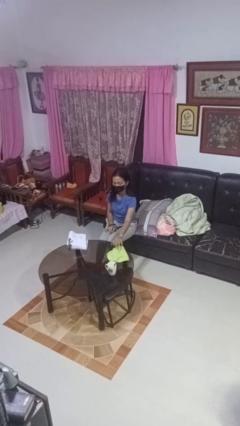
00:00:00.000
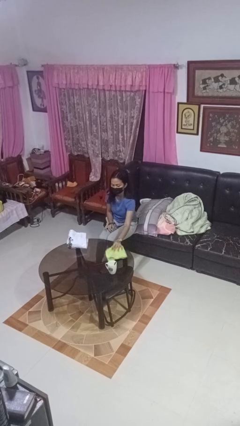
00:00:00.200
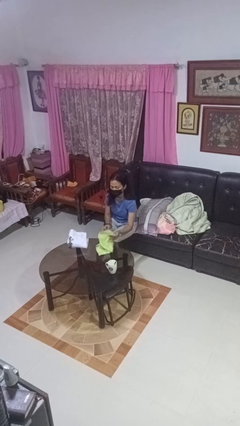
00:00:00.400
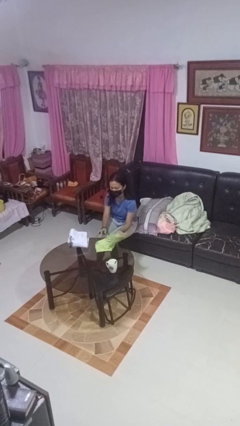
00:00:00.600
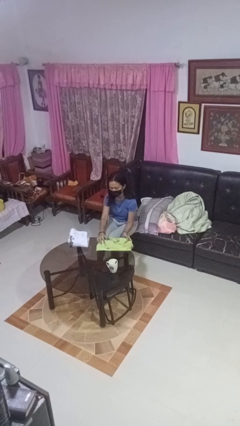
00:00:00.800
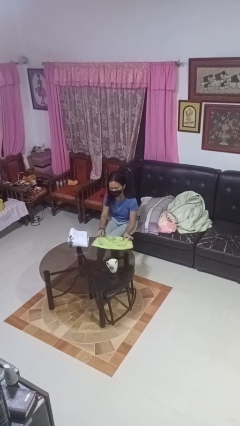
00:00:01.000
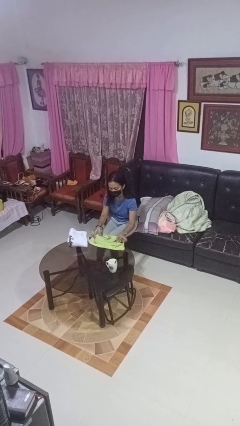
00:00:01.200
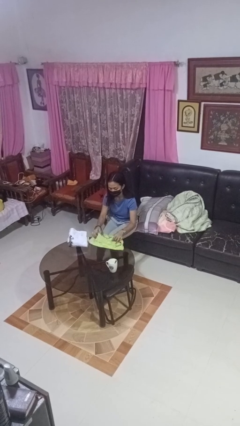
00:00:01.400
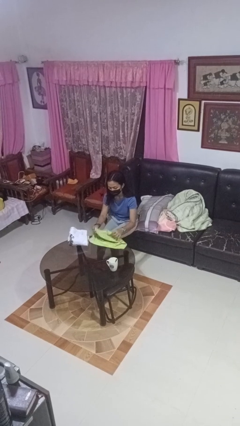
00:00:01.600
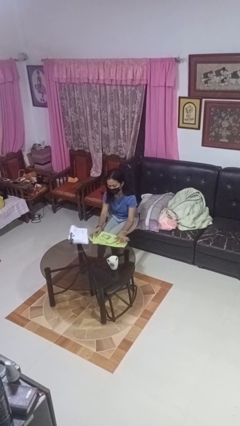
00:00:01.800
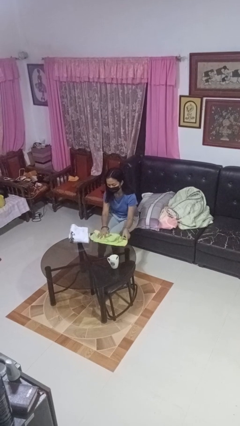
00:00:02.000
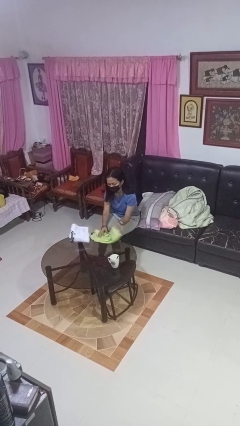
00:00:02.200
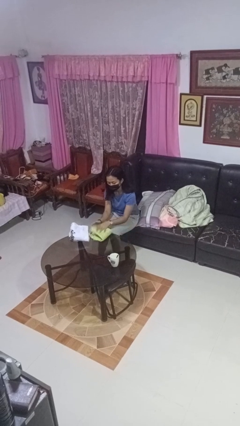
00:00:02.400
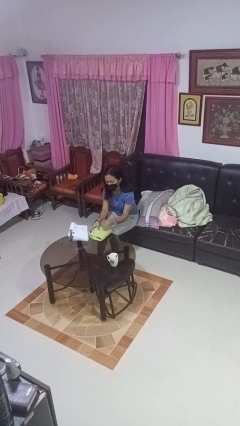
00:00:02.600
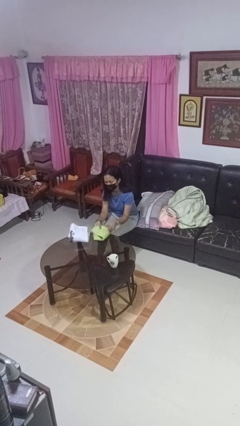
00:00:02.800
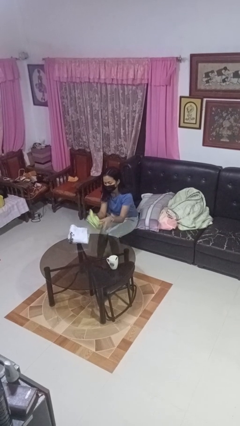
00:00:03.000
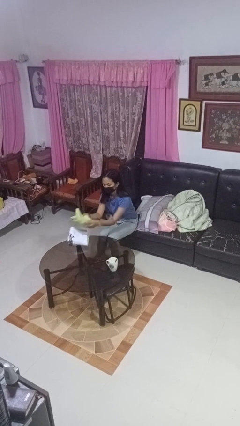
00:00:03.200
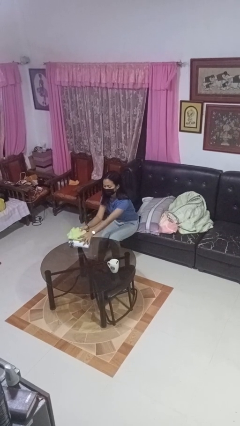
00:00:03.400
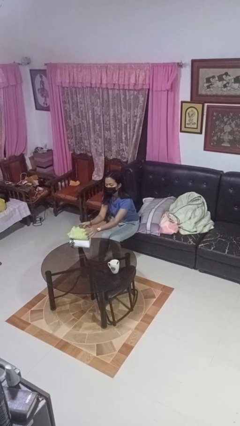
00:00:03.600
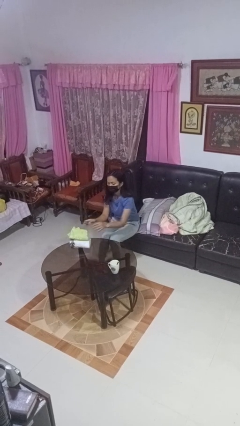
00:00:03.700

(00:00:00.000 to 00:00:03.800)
person folds towel

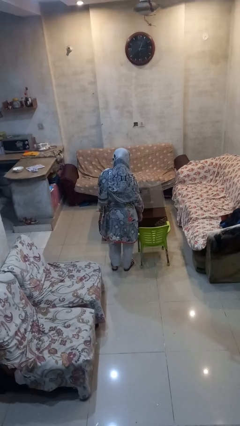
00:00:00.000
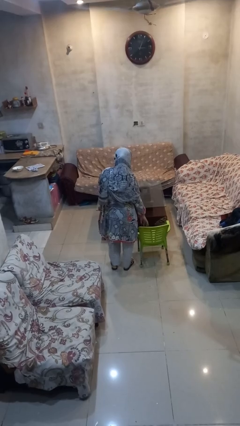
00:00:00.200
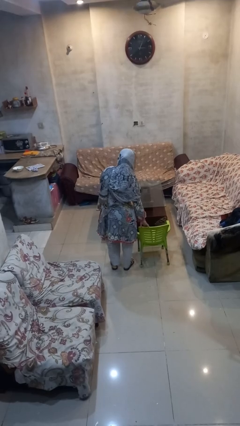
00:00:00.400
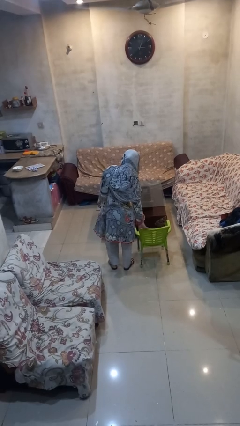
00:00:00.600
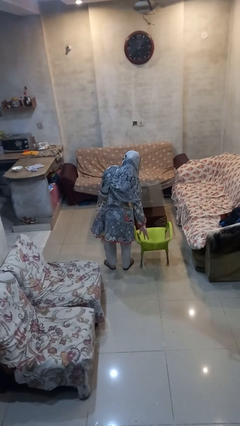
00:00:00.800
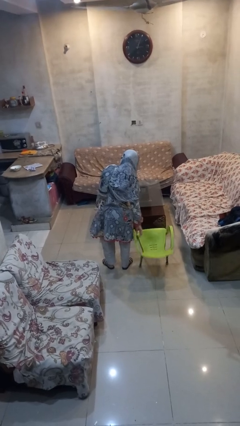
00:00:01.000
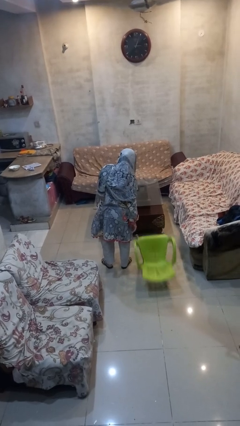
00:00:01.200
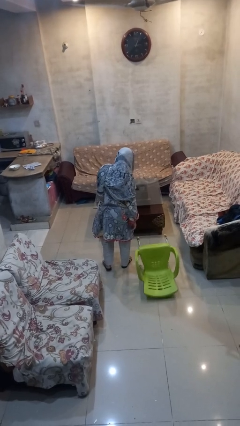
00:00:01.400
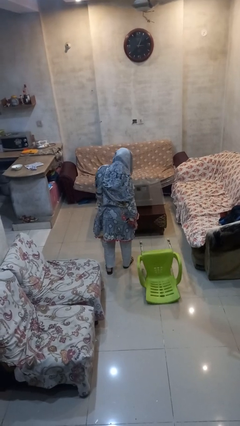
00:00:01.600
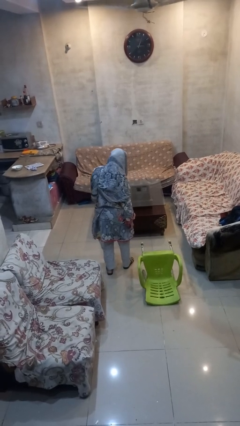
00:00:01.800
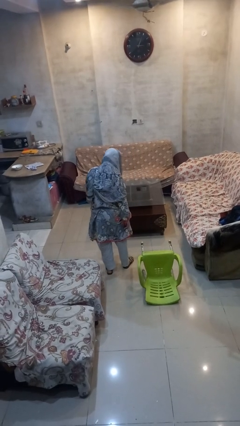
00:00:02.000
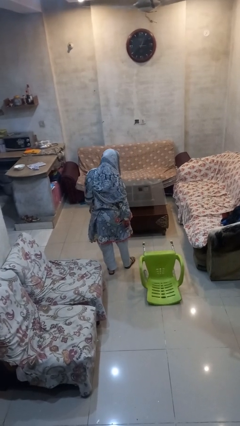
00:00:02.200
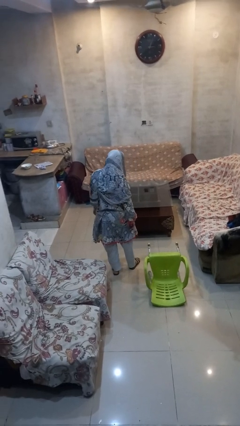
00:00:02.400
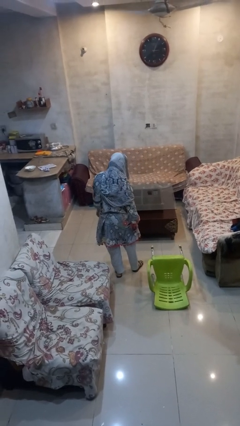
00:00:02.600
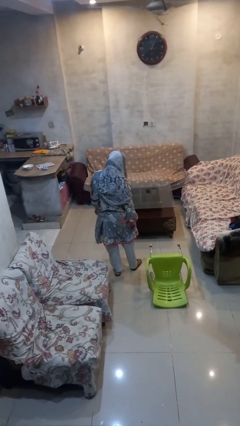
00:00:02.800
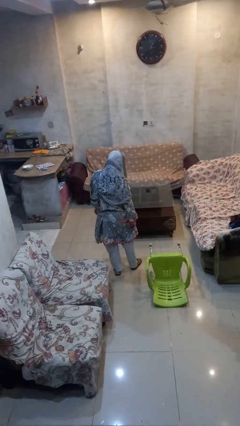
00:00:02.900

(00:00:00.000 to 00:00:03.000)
person knocks over furniture

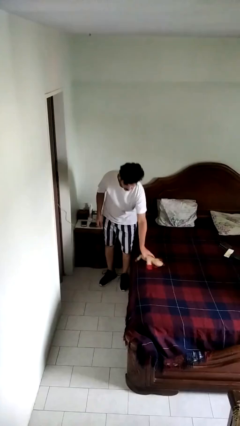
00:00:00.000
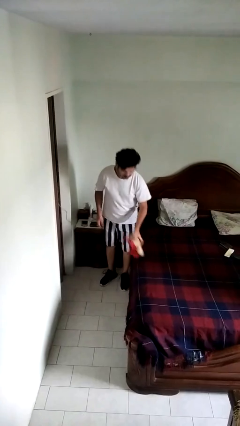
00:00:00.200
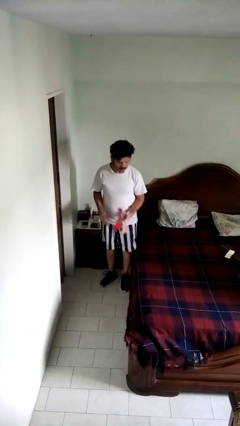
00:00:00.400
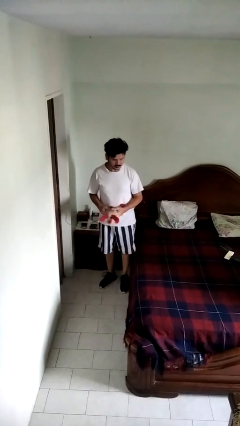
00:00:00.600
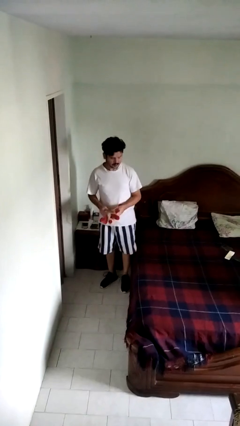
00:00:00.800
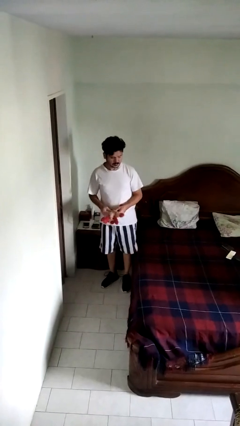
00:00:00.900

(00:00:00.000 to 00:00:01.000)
person picks up object from bed

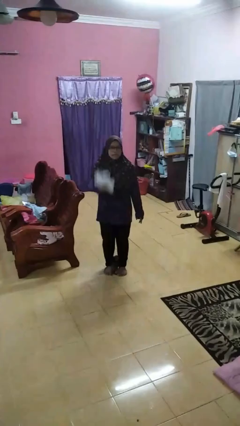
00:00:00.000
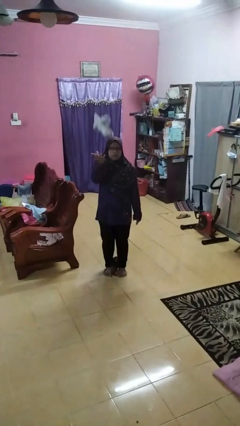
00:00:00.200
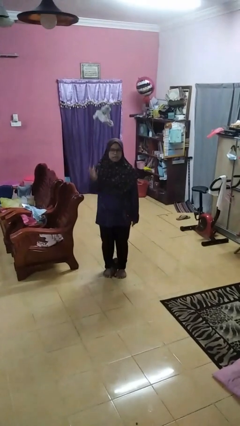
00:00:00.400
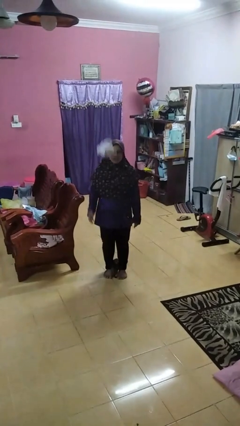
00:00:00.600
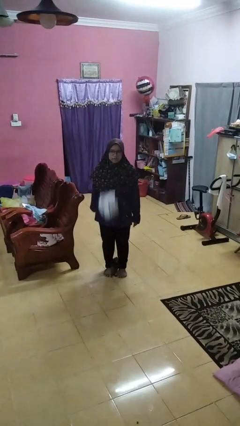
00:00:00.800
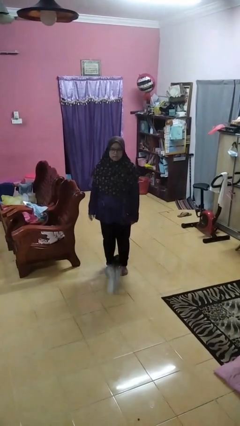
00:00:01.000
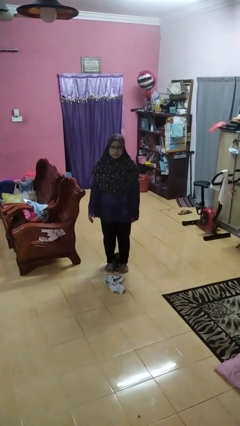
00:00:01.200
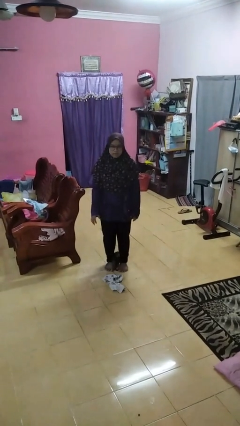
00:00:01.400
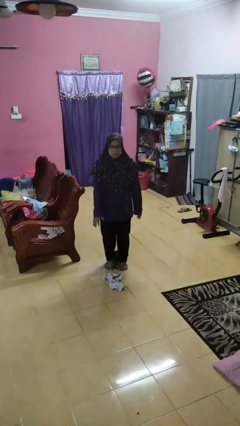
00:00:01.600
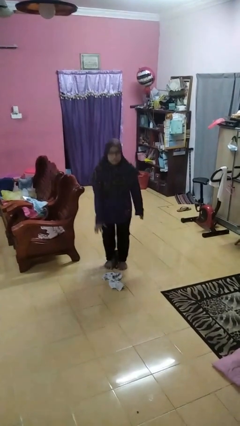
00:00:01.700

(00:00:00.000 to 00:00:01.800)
person throws object into air

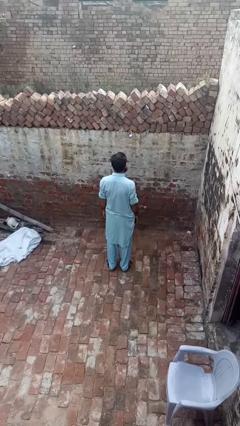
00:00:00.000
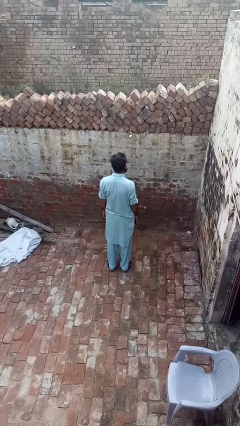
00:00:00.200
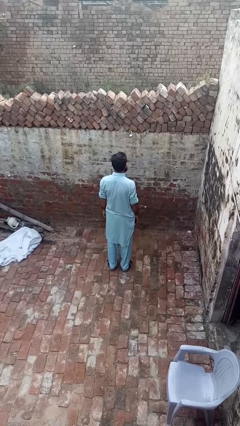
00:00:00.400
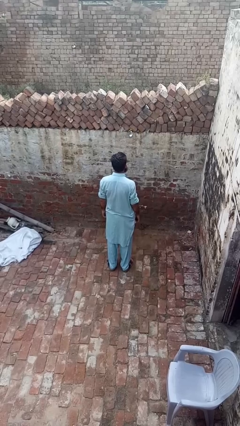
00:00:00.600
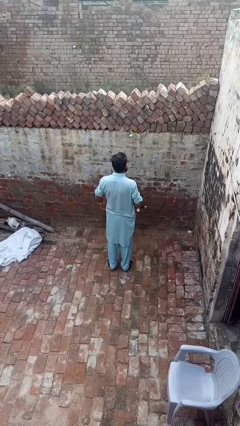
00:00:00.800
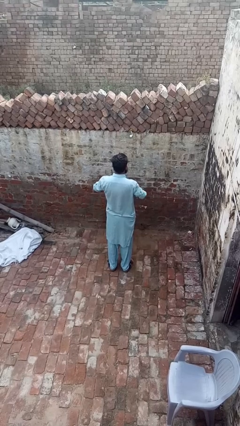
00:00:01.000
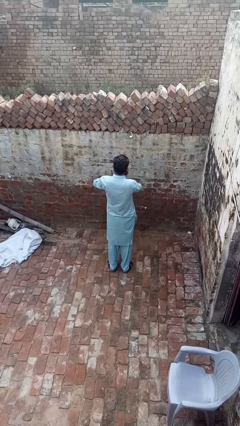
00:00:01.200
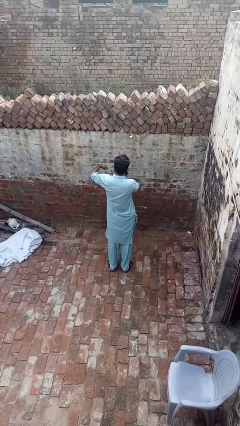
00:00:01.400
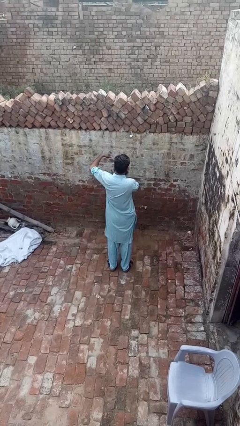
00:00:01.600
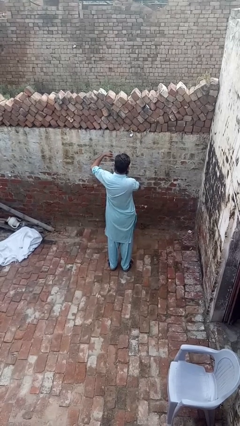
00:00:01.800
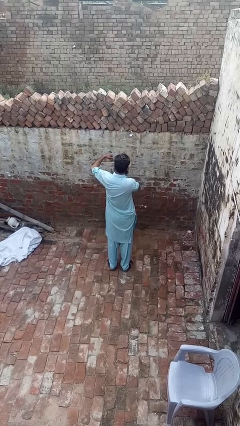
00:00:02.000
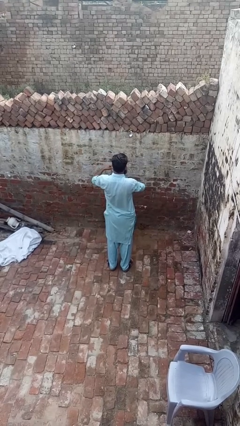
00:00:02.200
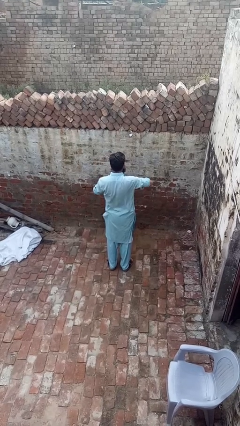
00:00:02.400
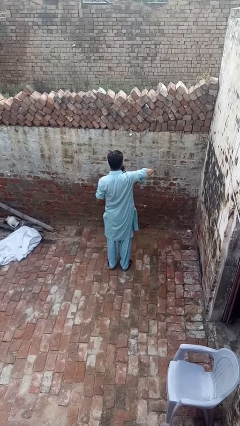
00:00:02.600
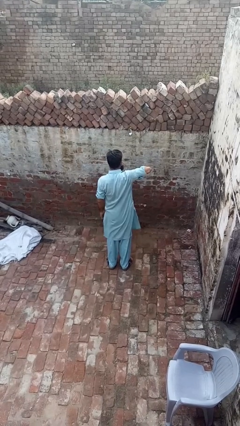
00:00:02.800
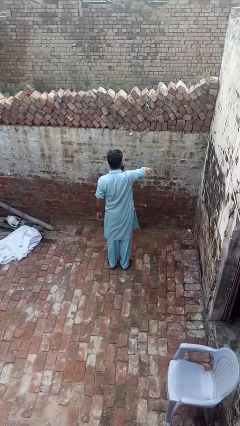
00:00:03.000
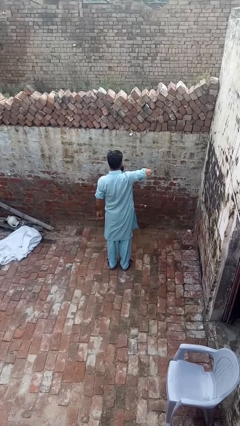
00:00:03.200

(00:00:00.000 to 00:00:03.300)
person applies deodorant

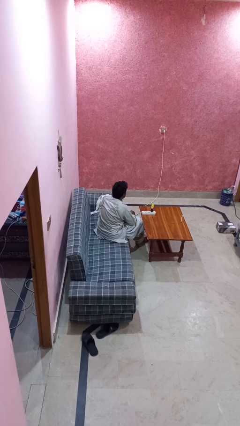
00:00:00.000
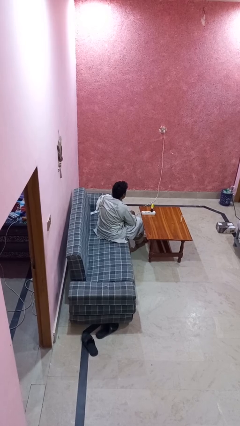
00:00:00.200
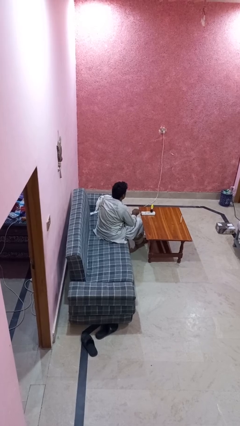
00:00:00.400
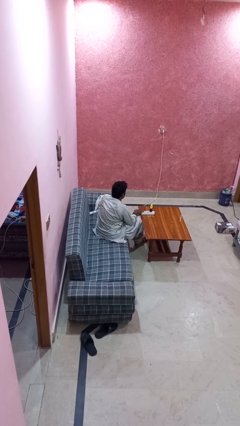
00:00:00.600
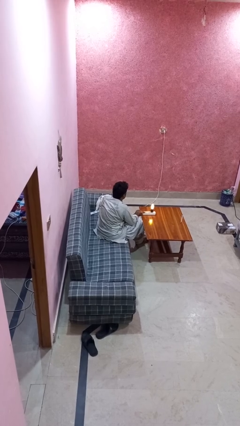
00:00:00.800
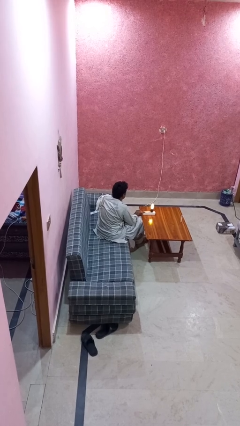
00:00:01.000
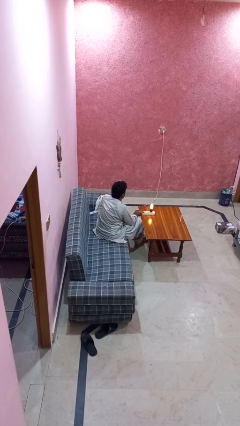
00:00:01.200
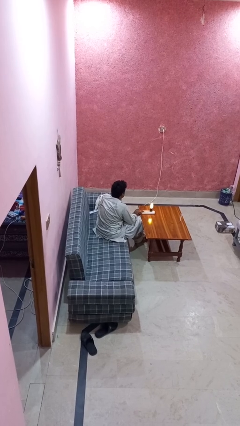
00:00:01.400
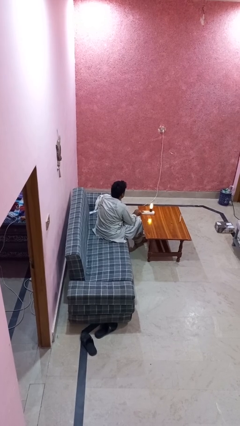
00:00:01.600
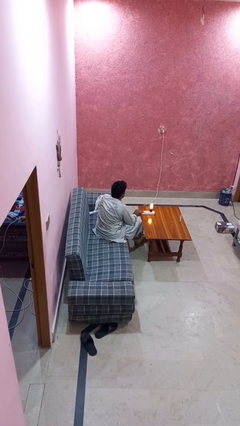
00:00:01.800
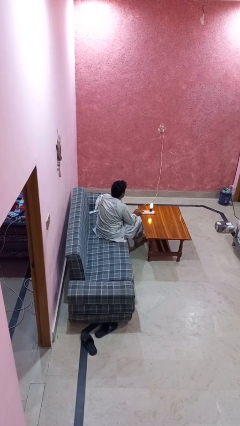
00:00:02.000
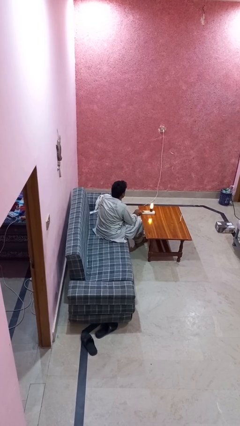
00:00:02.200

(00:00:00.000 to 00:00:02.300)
person turns on lamp

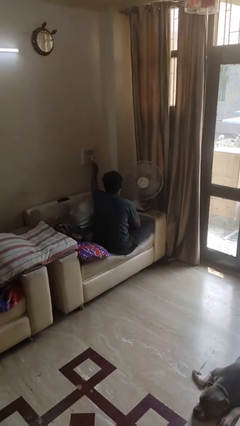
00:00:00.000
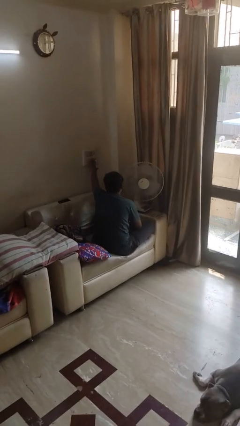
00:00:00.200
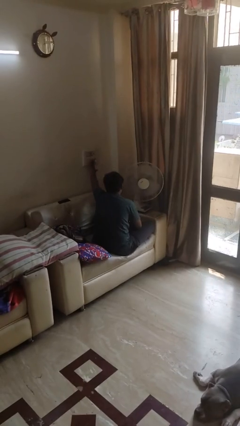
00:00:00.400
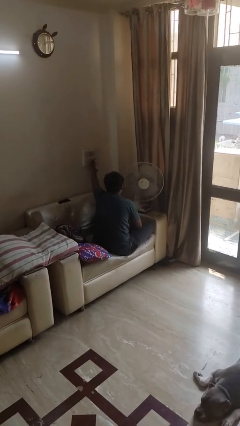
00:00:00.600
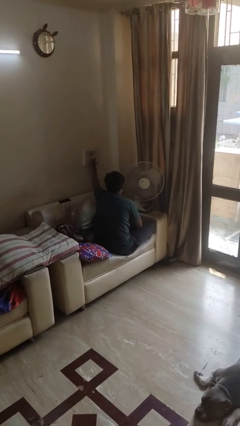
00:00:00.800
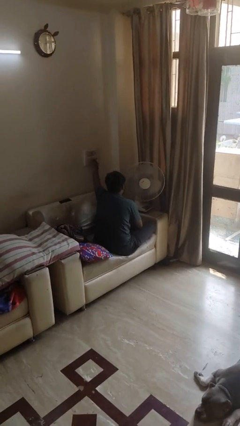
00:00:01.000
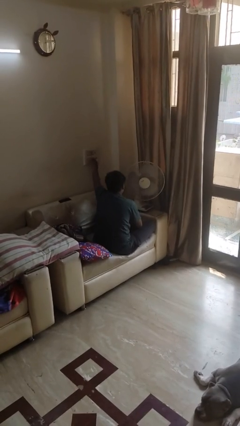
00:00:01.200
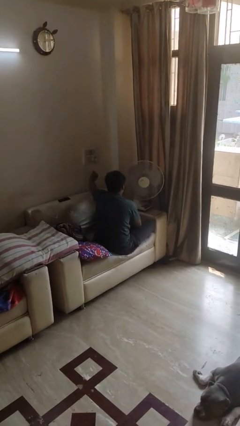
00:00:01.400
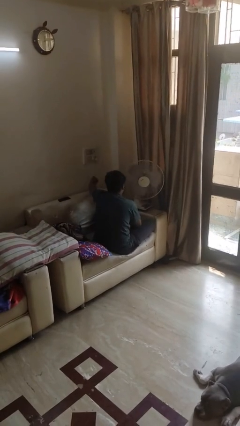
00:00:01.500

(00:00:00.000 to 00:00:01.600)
person turns on fan

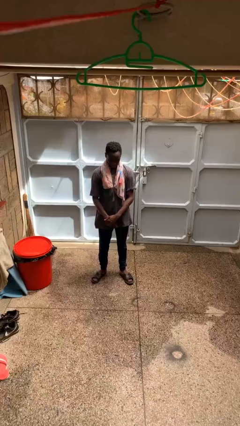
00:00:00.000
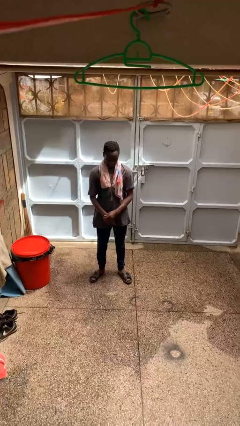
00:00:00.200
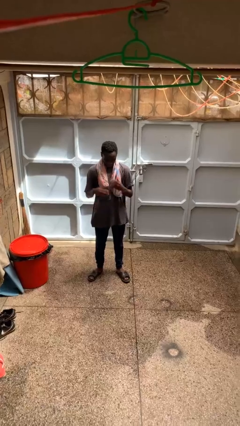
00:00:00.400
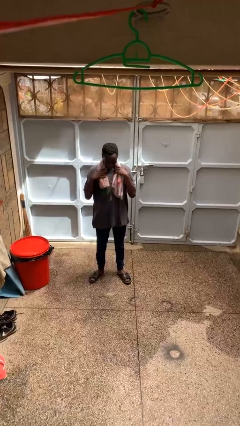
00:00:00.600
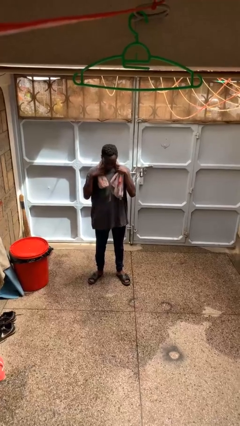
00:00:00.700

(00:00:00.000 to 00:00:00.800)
person takes off scarf
